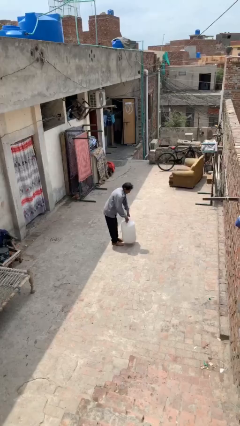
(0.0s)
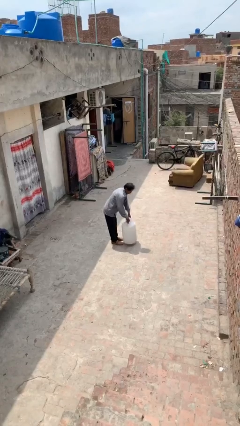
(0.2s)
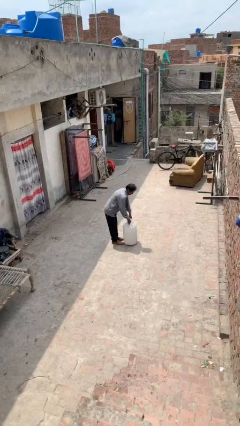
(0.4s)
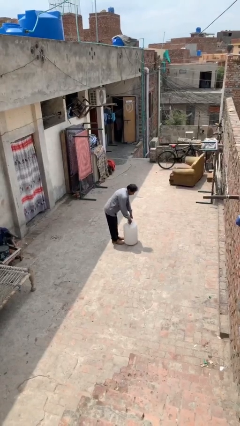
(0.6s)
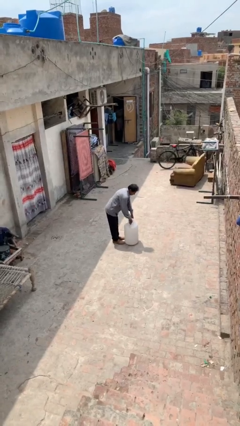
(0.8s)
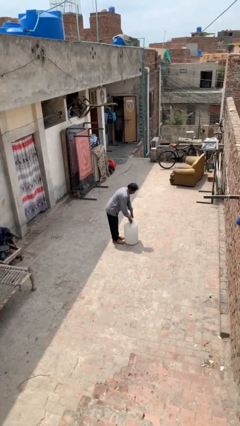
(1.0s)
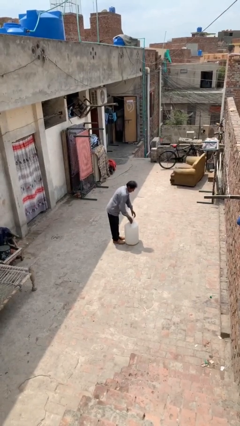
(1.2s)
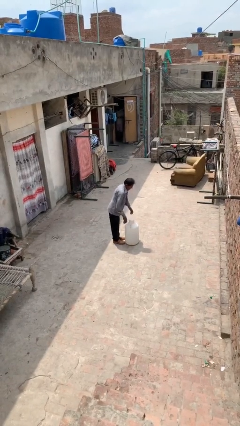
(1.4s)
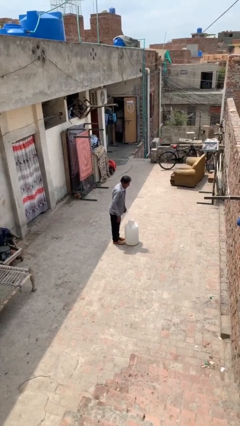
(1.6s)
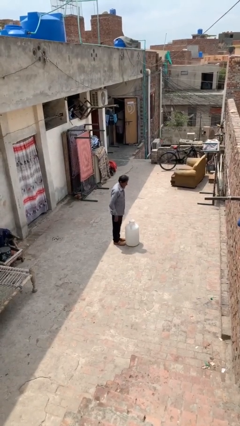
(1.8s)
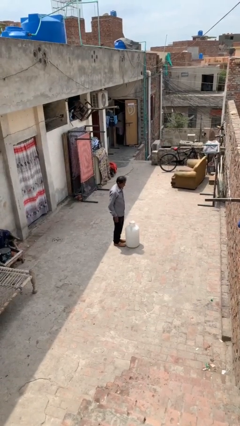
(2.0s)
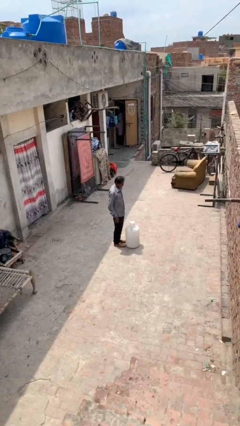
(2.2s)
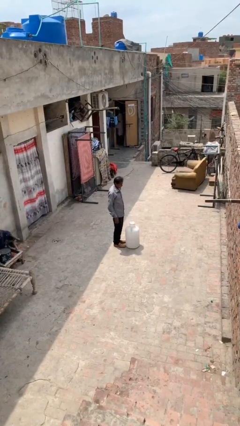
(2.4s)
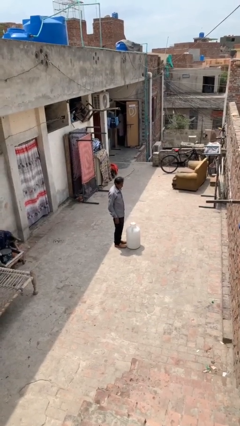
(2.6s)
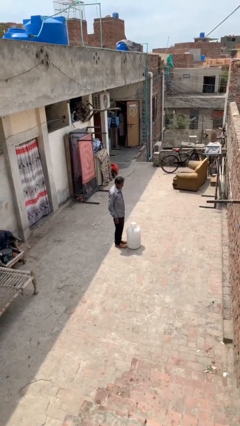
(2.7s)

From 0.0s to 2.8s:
person puts down object on floor

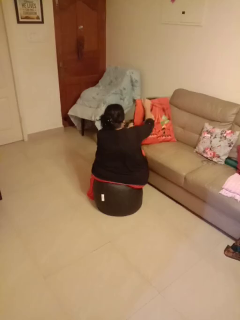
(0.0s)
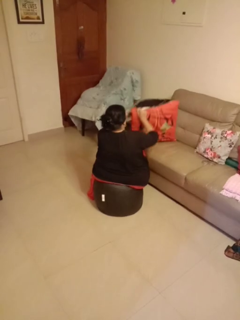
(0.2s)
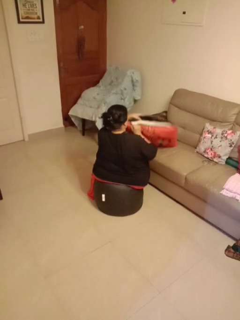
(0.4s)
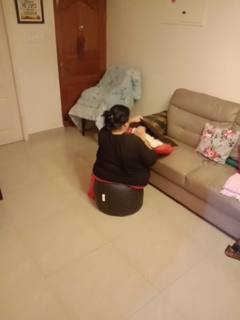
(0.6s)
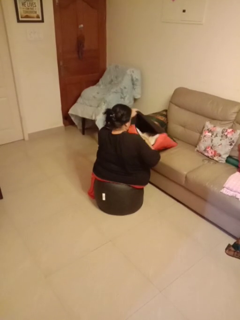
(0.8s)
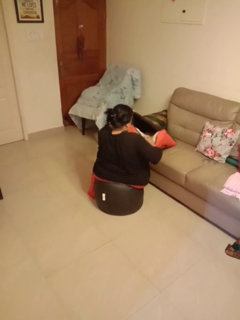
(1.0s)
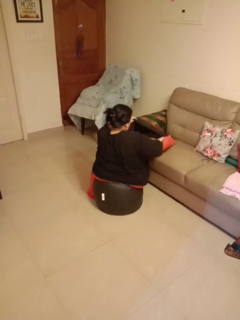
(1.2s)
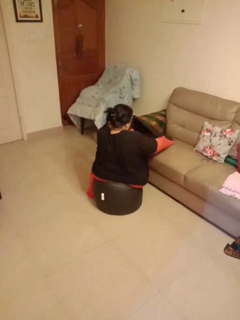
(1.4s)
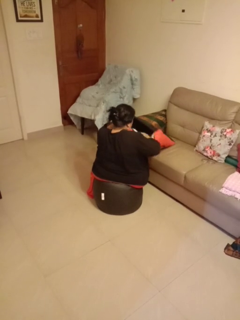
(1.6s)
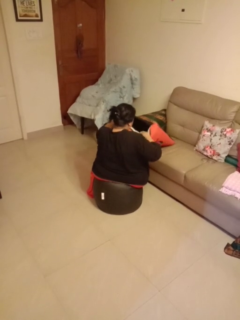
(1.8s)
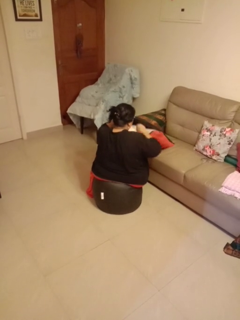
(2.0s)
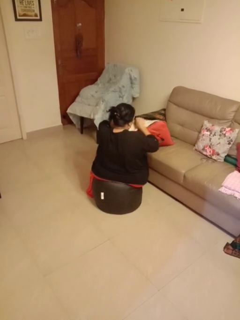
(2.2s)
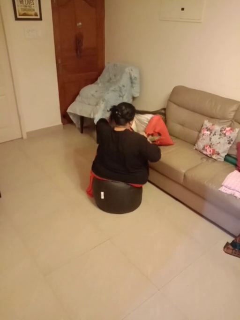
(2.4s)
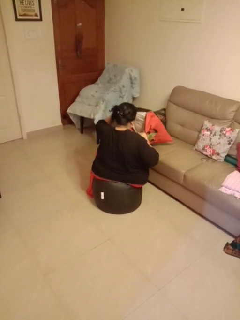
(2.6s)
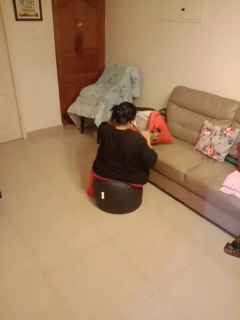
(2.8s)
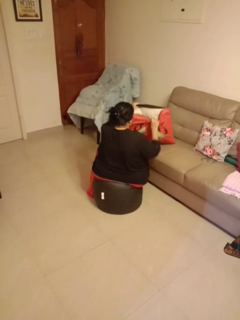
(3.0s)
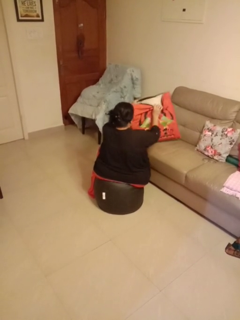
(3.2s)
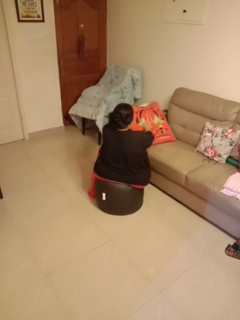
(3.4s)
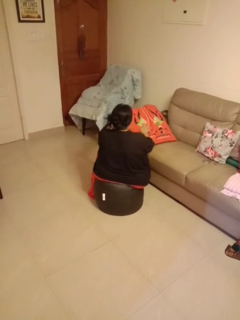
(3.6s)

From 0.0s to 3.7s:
person searches in couch

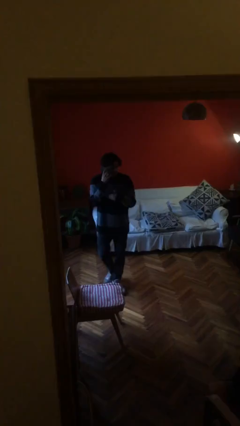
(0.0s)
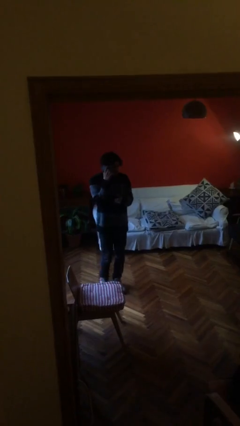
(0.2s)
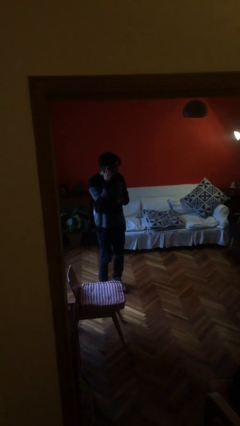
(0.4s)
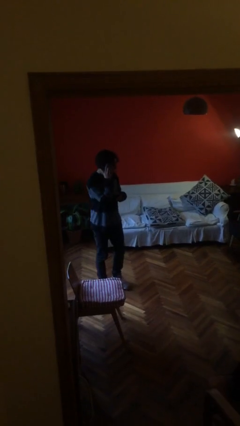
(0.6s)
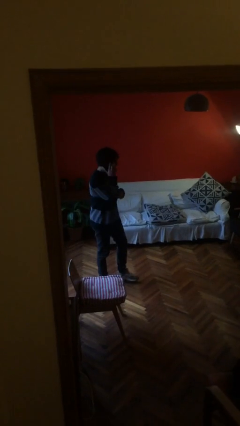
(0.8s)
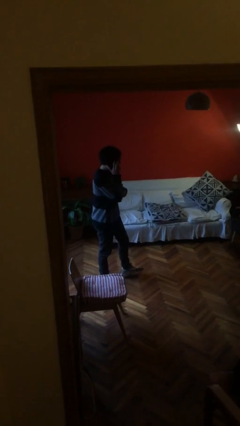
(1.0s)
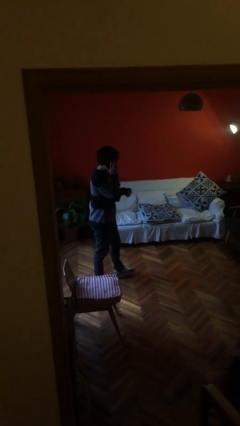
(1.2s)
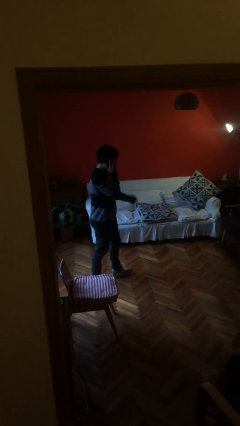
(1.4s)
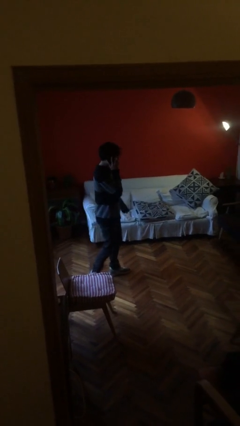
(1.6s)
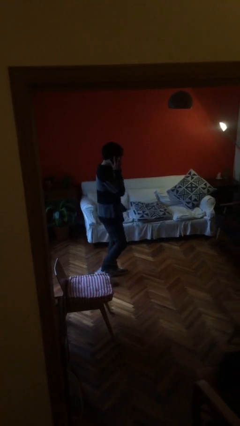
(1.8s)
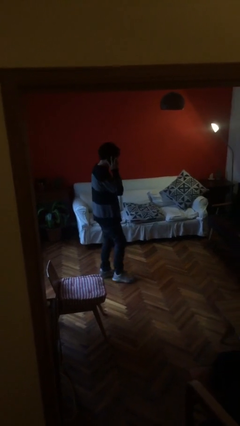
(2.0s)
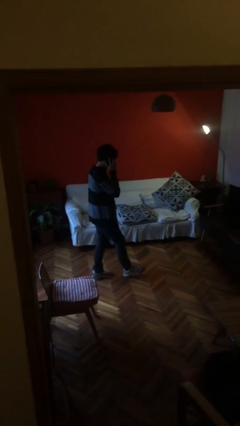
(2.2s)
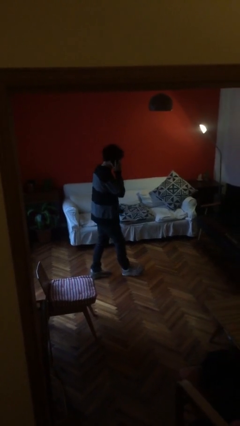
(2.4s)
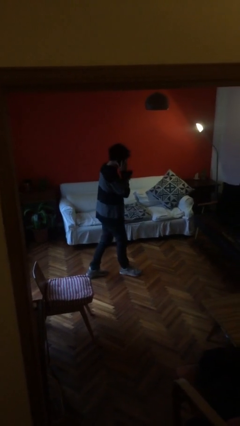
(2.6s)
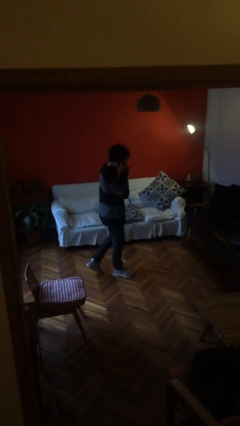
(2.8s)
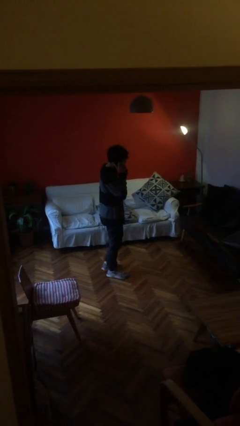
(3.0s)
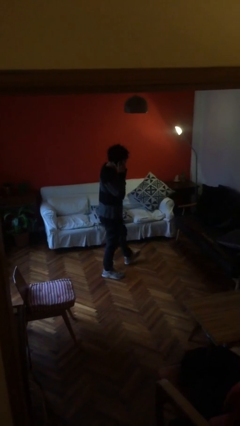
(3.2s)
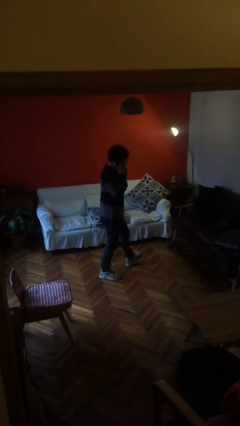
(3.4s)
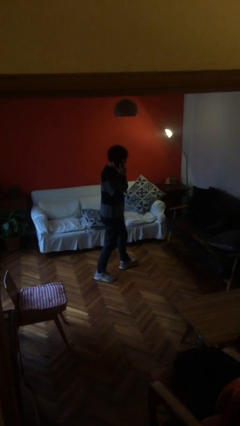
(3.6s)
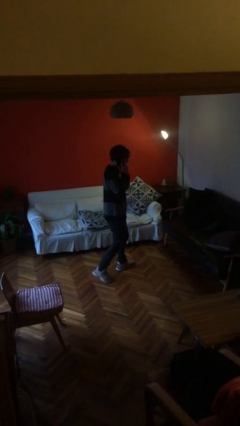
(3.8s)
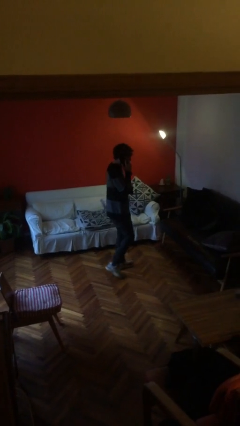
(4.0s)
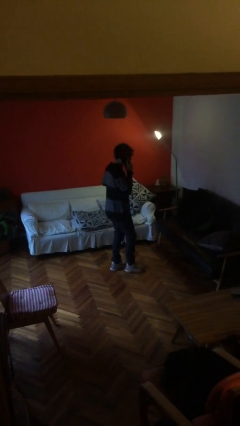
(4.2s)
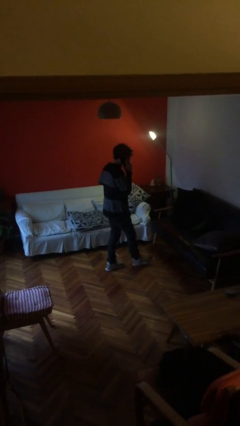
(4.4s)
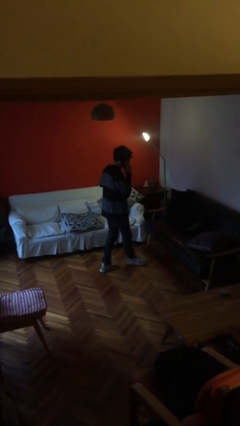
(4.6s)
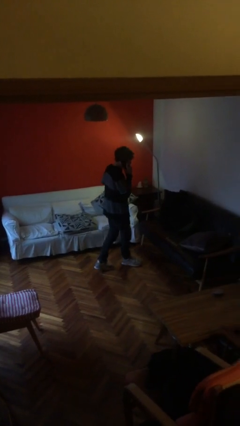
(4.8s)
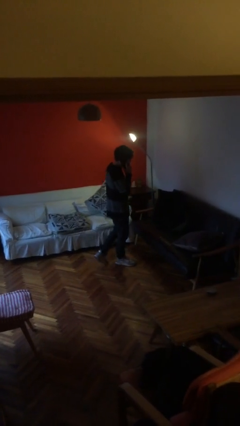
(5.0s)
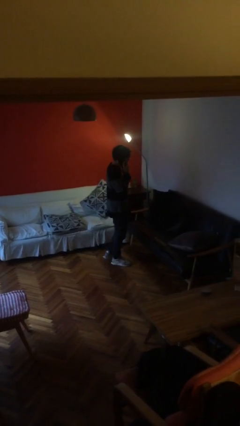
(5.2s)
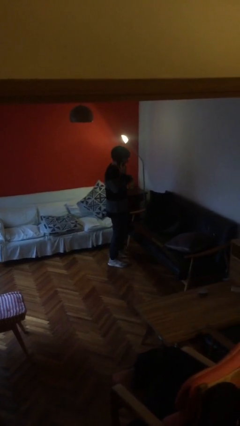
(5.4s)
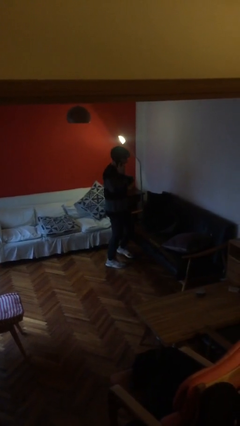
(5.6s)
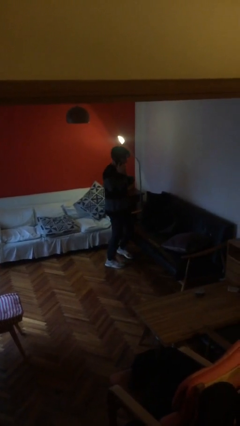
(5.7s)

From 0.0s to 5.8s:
person talks on phone

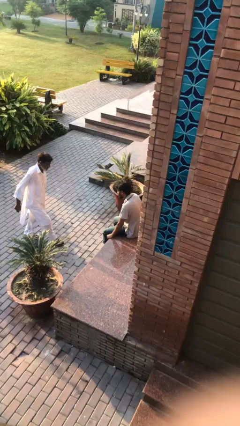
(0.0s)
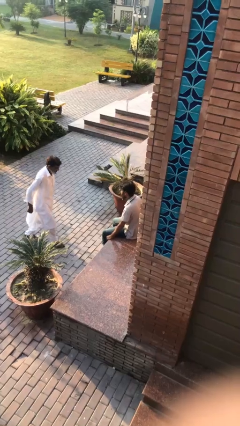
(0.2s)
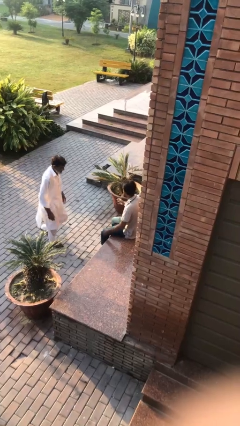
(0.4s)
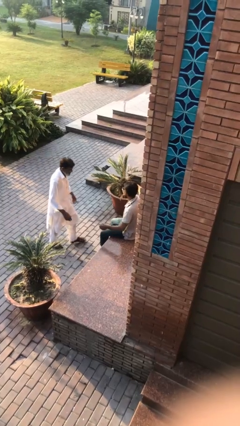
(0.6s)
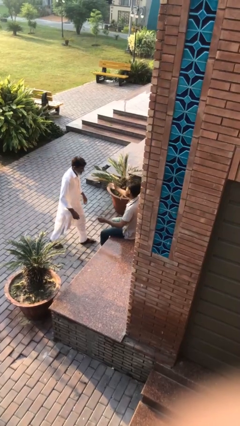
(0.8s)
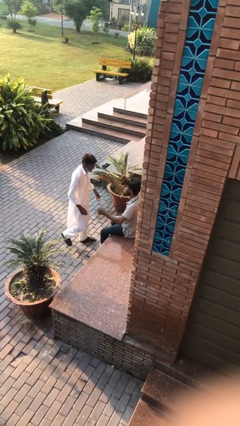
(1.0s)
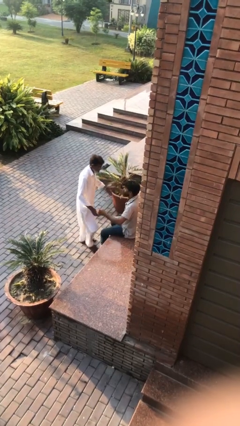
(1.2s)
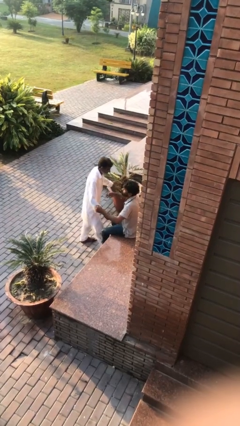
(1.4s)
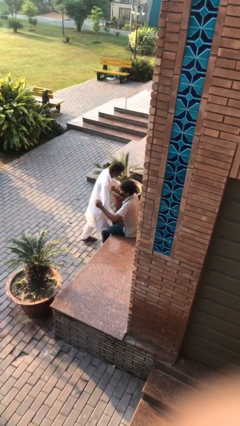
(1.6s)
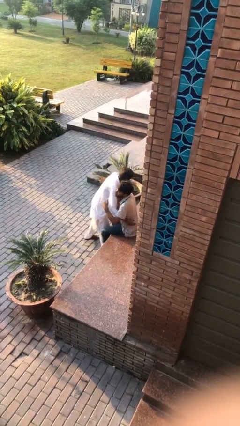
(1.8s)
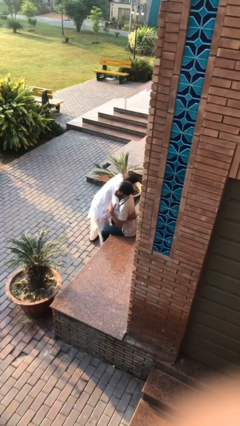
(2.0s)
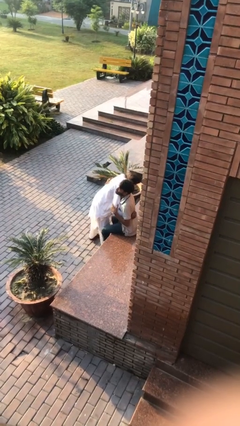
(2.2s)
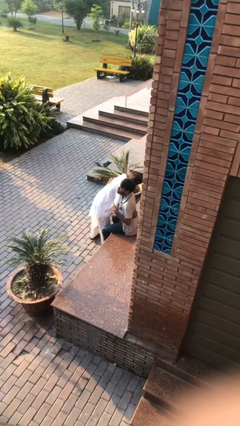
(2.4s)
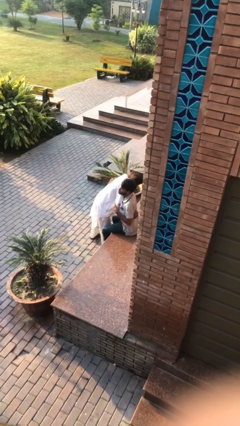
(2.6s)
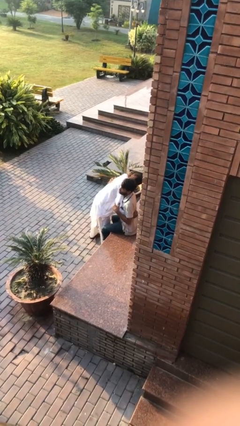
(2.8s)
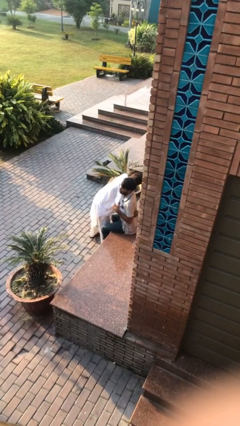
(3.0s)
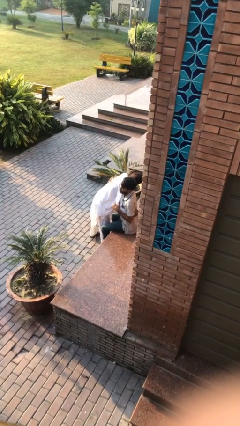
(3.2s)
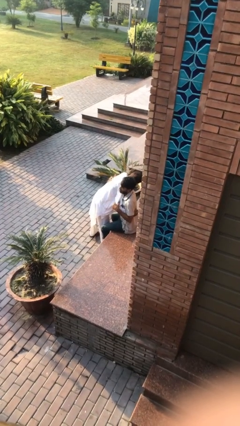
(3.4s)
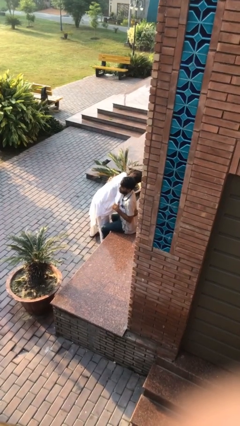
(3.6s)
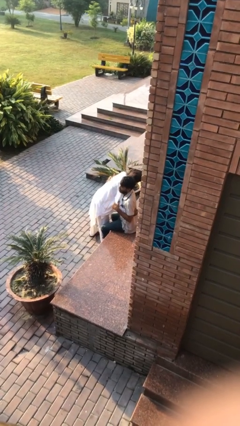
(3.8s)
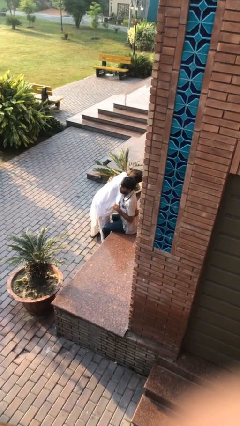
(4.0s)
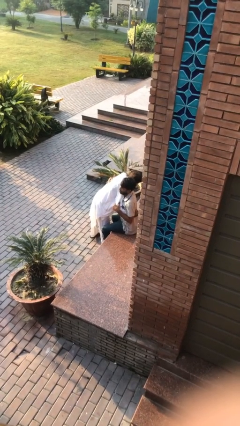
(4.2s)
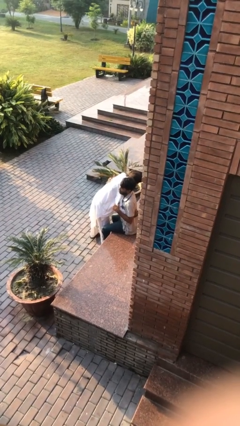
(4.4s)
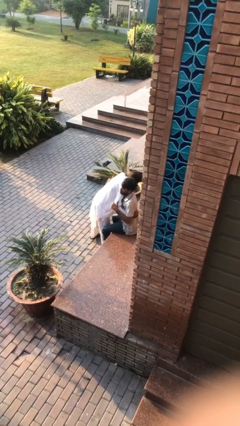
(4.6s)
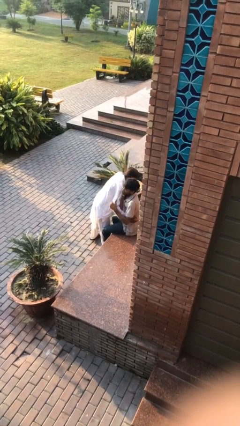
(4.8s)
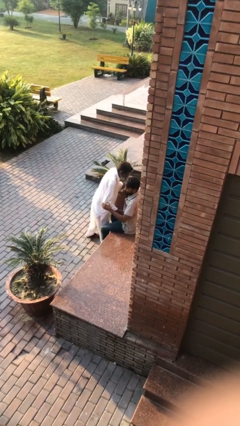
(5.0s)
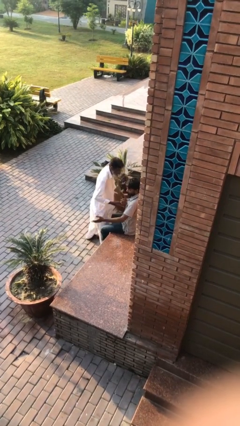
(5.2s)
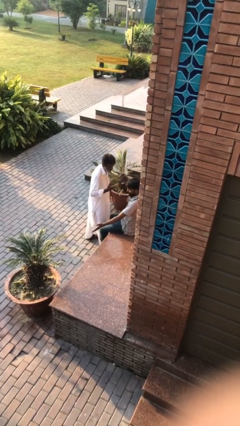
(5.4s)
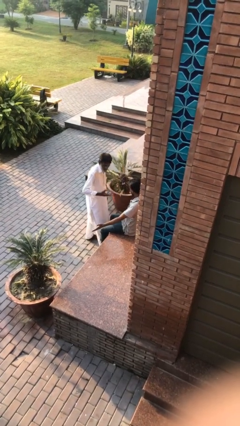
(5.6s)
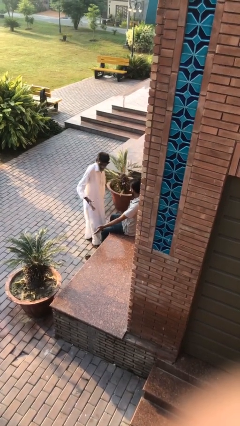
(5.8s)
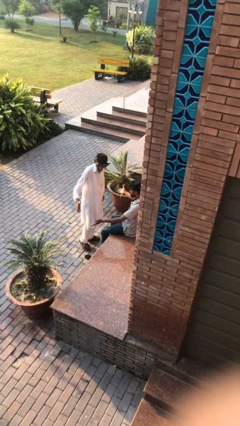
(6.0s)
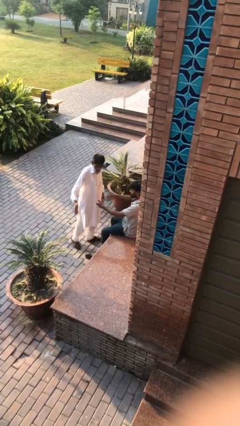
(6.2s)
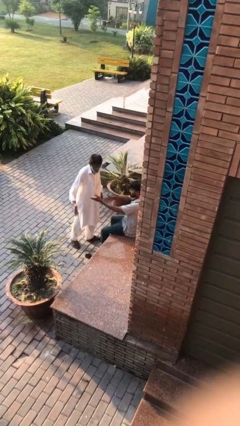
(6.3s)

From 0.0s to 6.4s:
person embraces person
